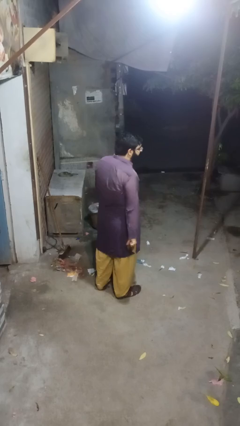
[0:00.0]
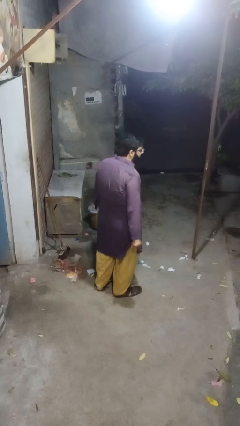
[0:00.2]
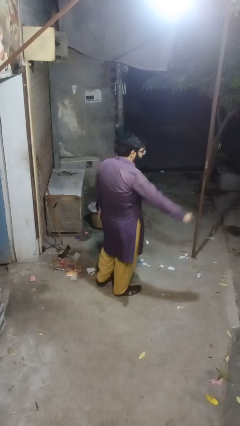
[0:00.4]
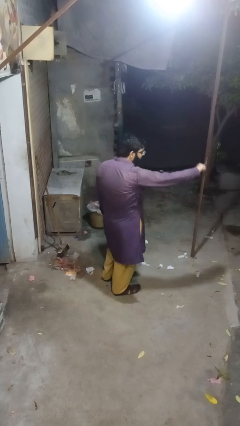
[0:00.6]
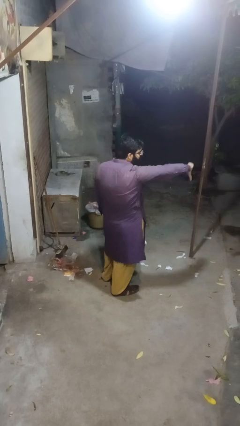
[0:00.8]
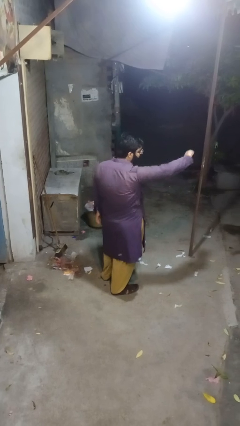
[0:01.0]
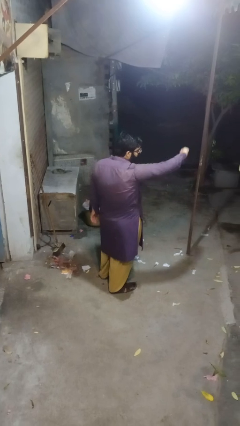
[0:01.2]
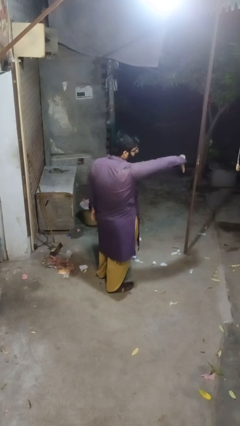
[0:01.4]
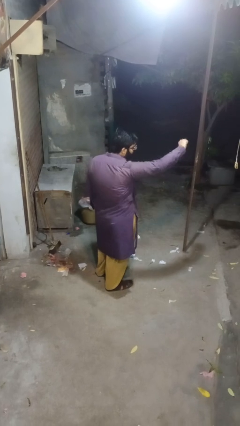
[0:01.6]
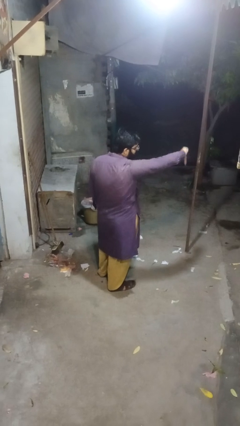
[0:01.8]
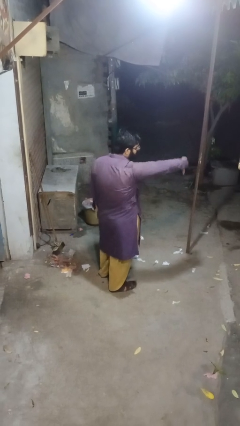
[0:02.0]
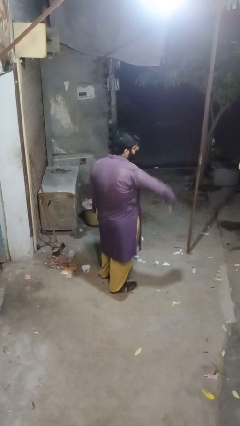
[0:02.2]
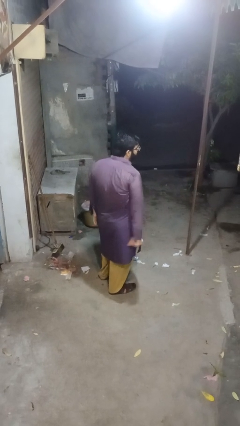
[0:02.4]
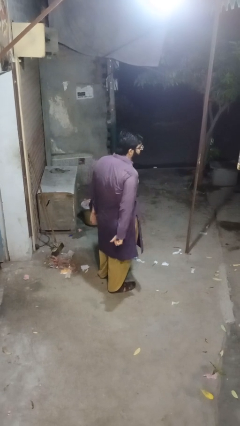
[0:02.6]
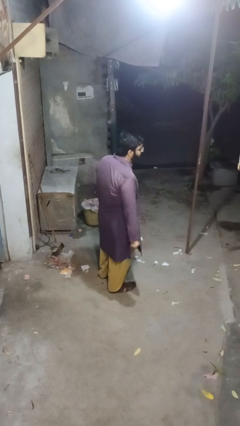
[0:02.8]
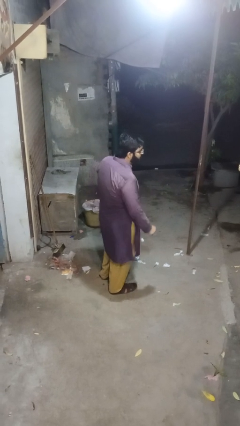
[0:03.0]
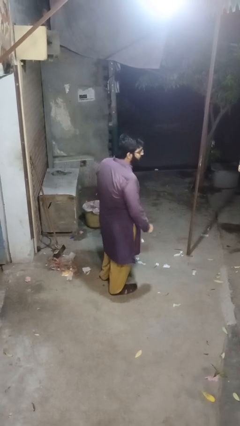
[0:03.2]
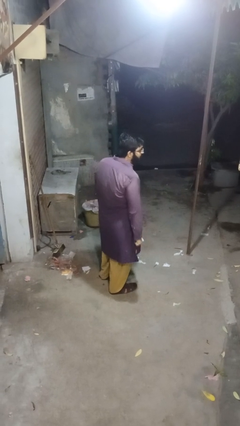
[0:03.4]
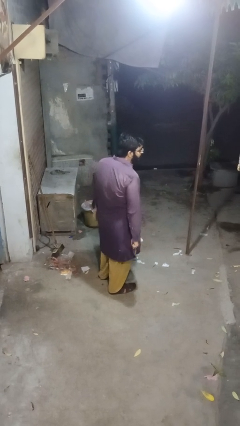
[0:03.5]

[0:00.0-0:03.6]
person gestures thumbs down

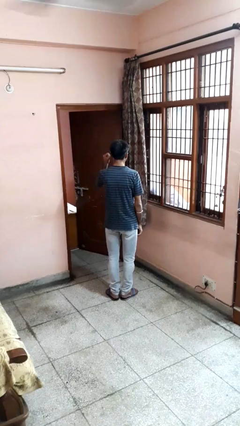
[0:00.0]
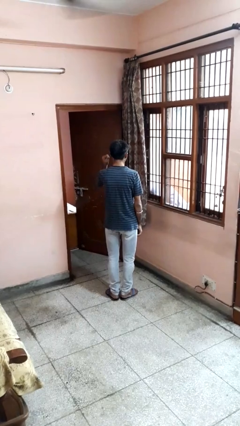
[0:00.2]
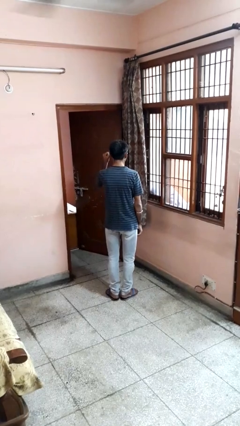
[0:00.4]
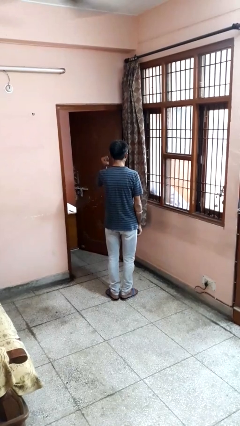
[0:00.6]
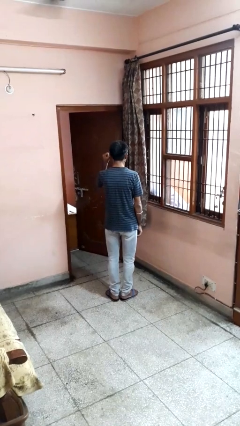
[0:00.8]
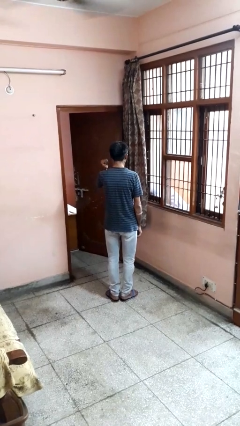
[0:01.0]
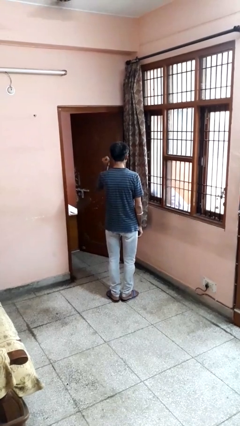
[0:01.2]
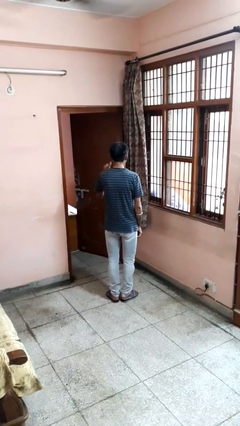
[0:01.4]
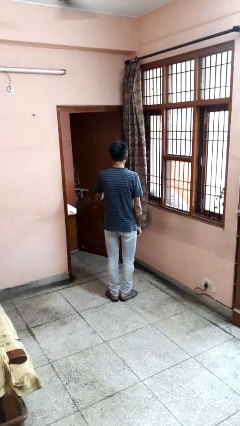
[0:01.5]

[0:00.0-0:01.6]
person gestures behind me

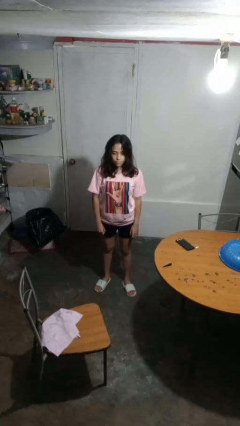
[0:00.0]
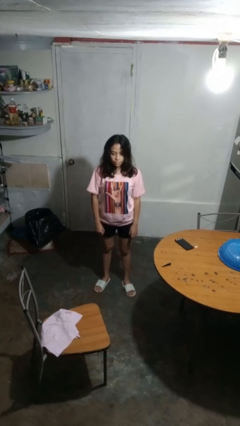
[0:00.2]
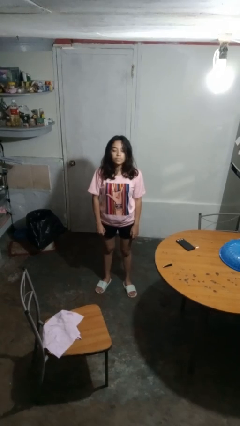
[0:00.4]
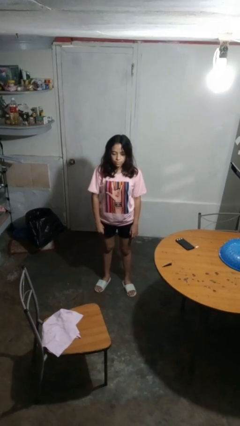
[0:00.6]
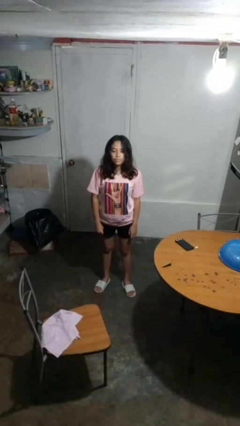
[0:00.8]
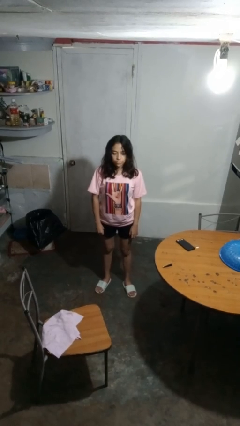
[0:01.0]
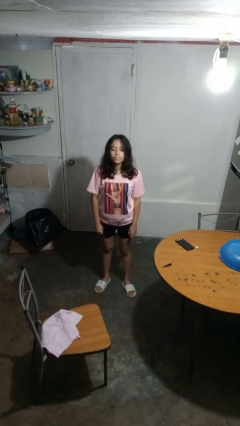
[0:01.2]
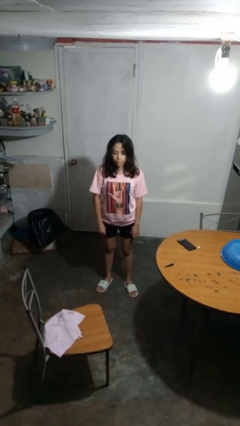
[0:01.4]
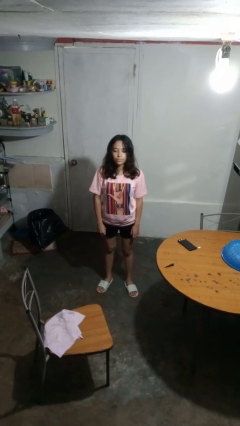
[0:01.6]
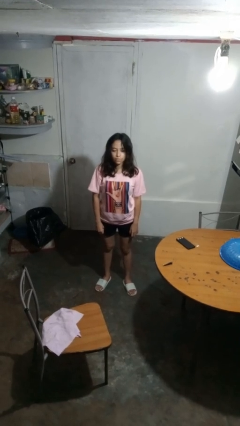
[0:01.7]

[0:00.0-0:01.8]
person nods head

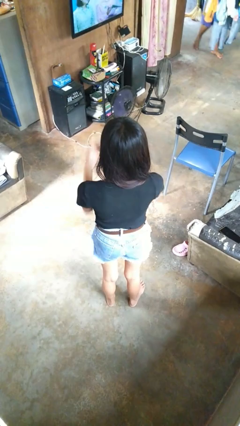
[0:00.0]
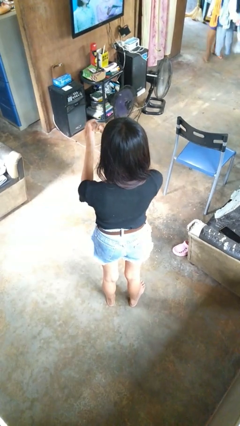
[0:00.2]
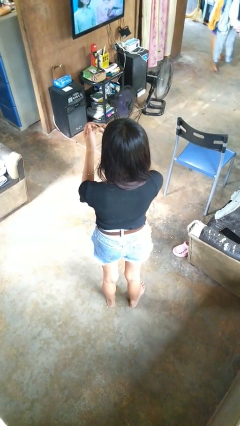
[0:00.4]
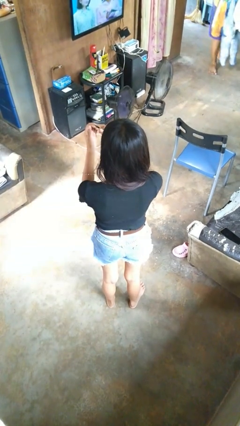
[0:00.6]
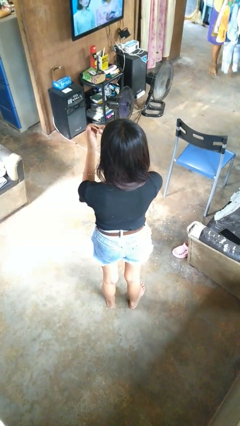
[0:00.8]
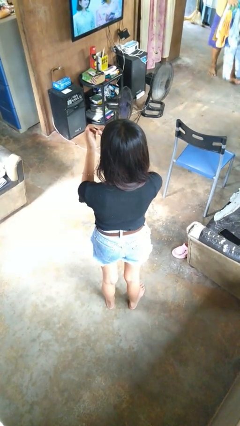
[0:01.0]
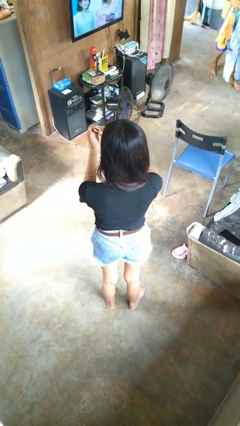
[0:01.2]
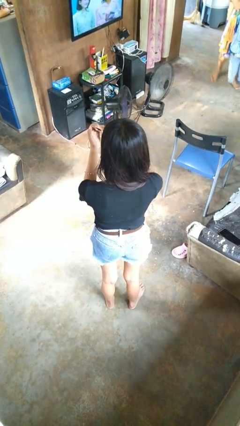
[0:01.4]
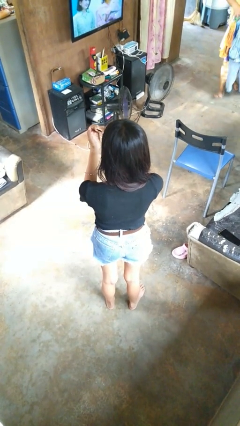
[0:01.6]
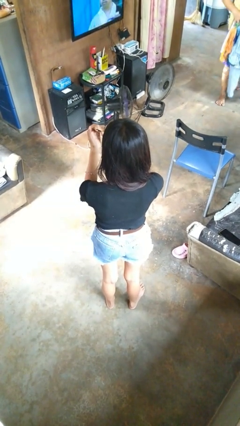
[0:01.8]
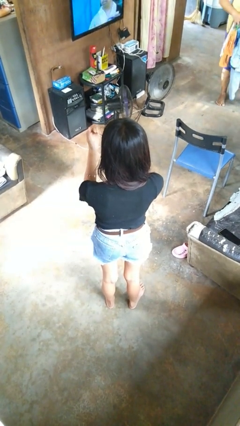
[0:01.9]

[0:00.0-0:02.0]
person files fingernails

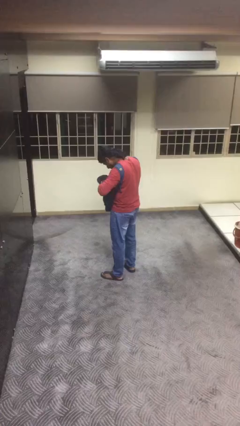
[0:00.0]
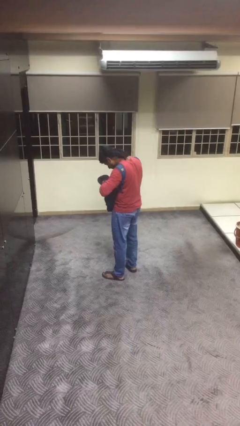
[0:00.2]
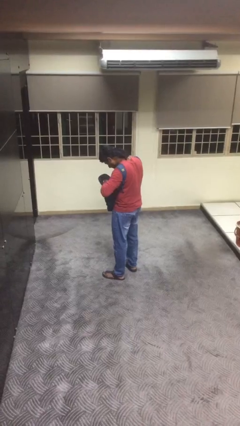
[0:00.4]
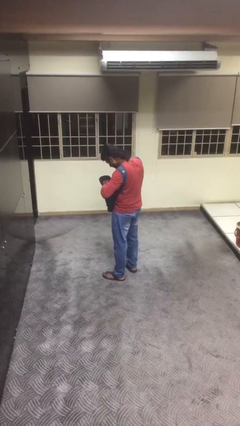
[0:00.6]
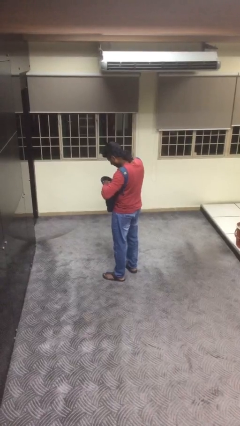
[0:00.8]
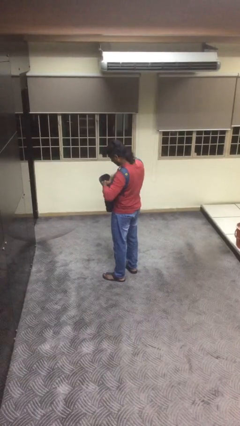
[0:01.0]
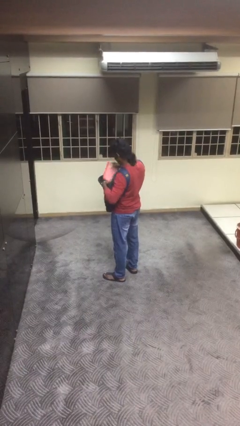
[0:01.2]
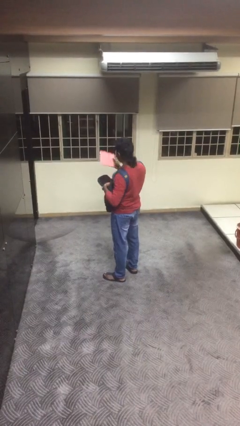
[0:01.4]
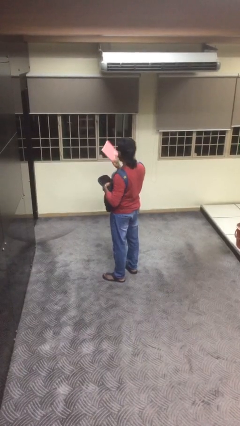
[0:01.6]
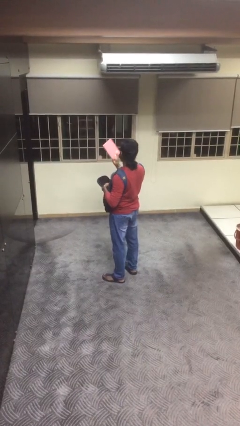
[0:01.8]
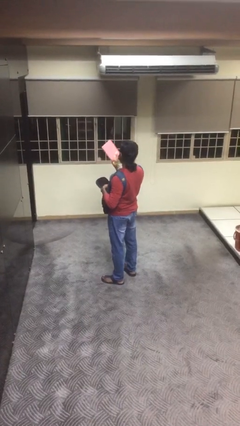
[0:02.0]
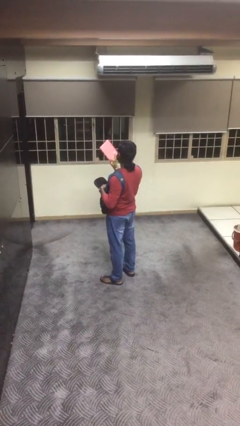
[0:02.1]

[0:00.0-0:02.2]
person takes object from backpack

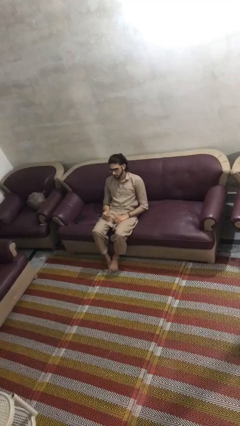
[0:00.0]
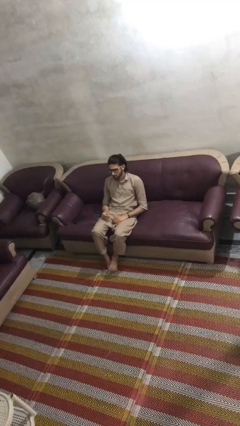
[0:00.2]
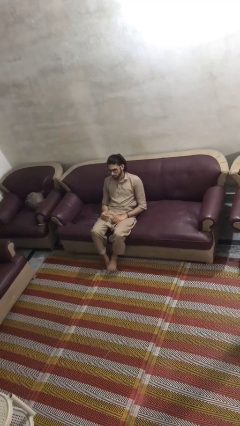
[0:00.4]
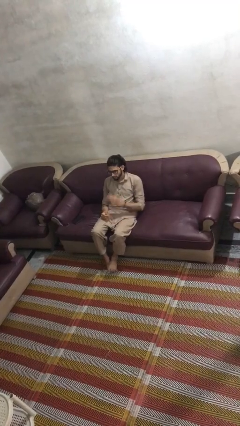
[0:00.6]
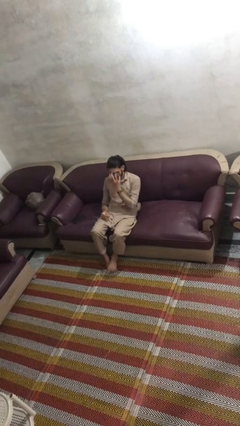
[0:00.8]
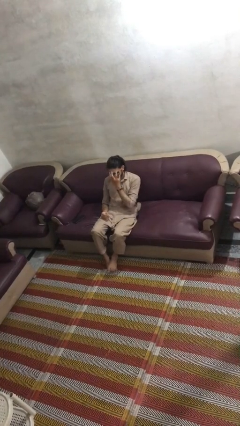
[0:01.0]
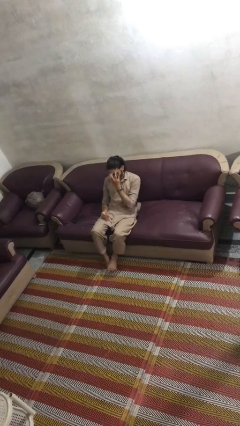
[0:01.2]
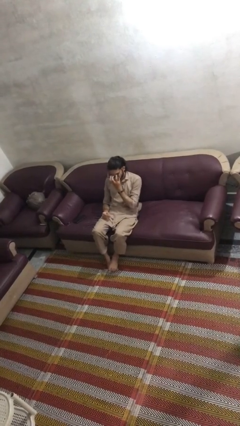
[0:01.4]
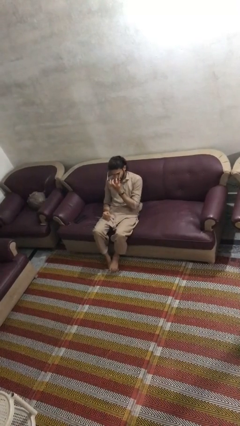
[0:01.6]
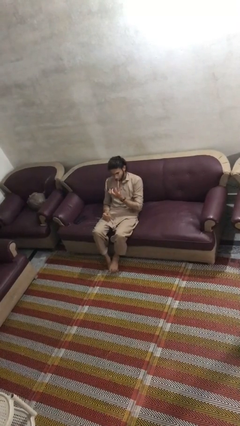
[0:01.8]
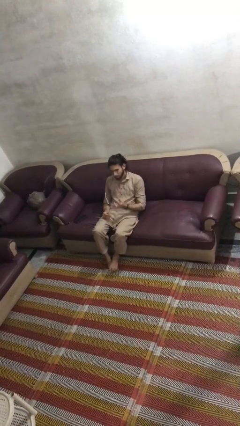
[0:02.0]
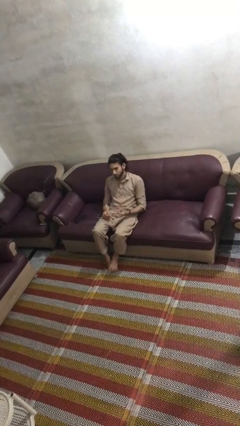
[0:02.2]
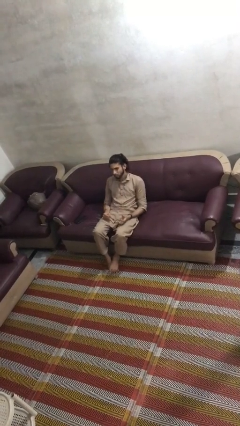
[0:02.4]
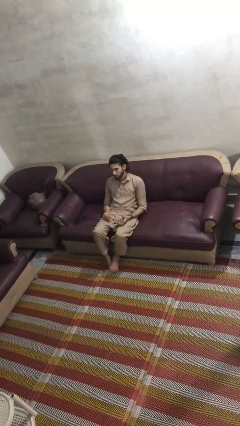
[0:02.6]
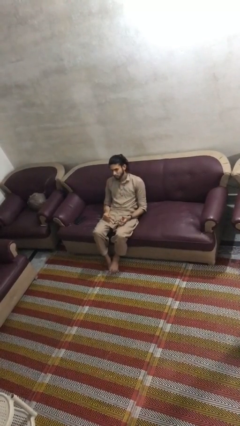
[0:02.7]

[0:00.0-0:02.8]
person takes off glasses

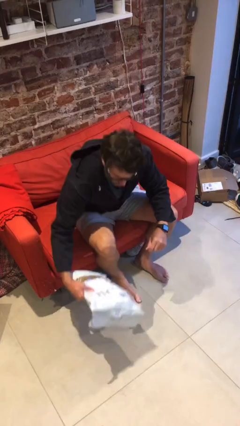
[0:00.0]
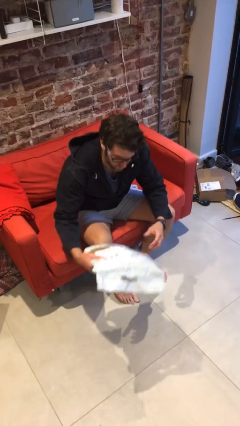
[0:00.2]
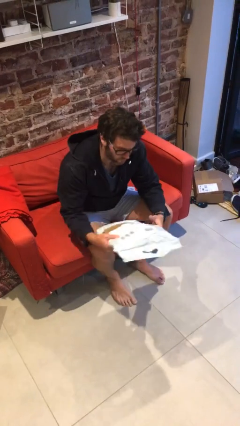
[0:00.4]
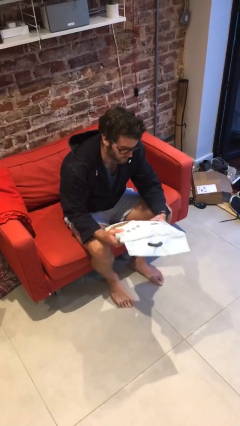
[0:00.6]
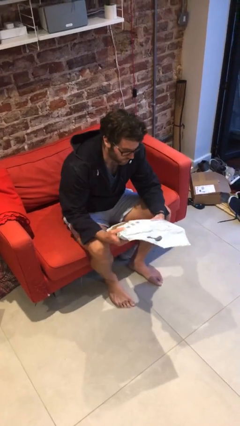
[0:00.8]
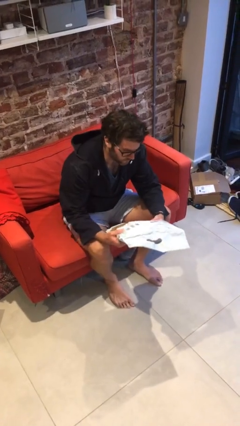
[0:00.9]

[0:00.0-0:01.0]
person picks up object from floor

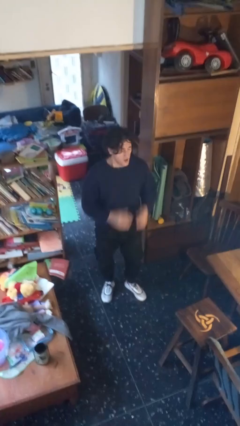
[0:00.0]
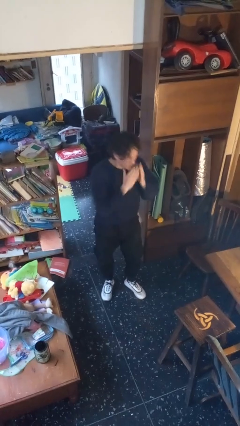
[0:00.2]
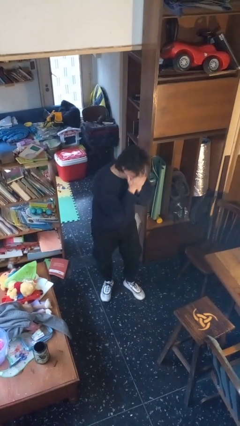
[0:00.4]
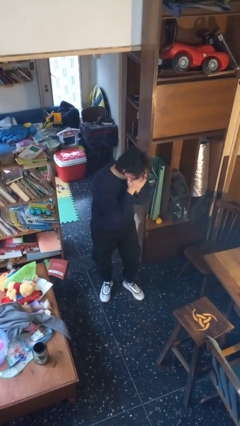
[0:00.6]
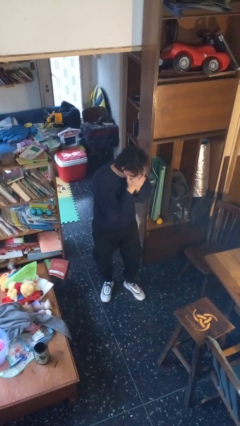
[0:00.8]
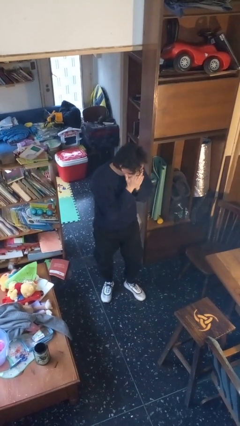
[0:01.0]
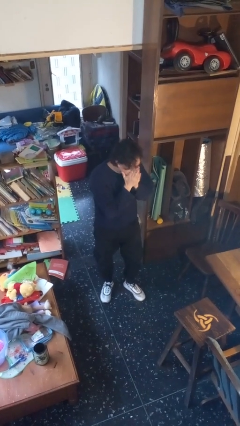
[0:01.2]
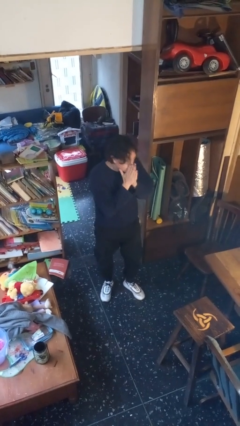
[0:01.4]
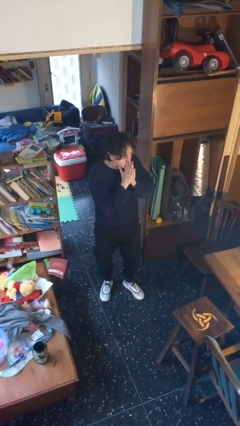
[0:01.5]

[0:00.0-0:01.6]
person sneezes into hand

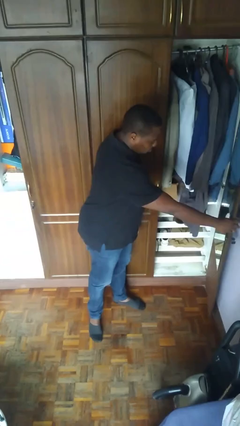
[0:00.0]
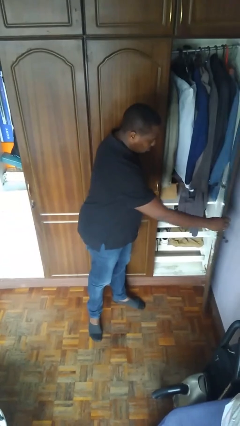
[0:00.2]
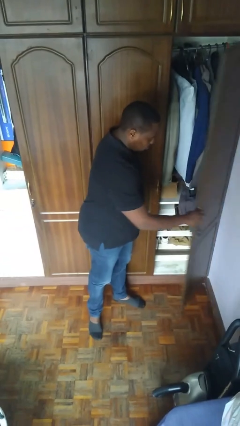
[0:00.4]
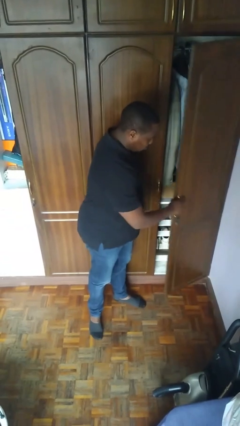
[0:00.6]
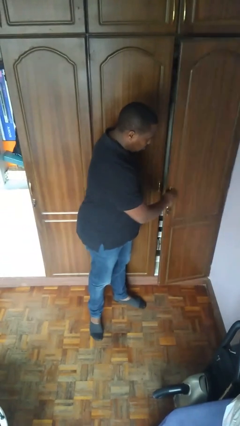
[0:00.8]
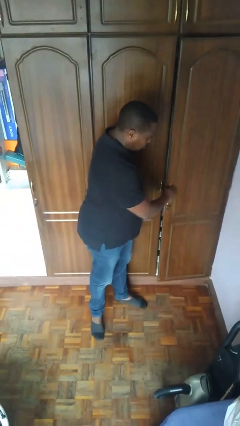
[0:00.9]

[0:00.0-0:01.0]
person closes closet door
